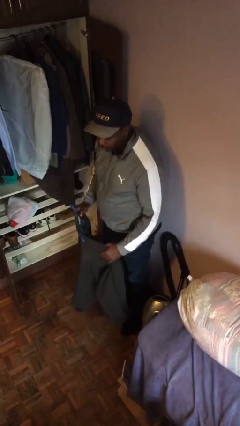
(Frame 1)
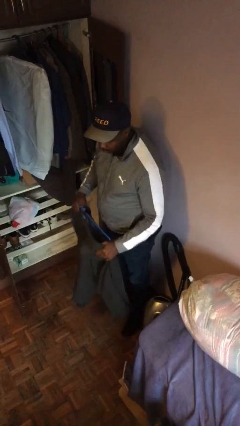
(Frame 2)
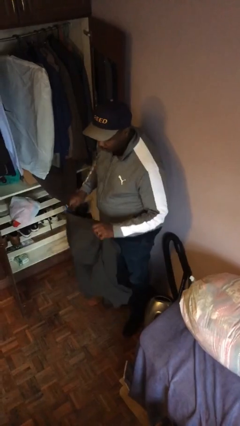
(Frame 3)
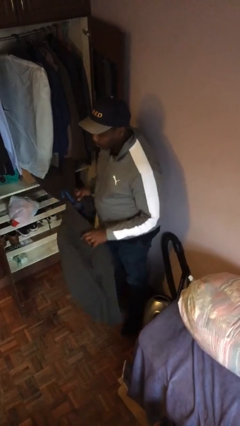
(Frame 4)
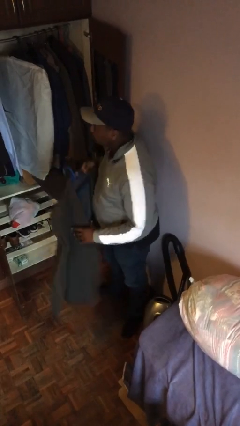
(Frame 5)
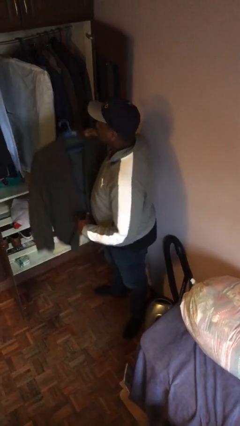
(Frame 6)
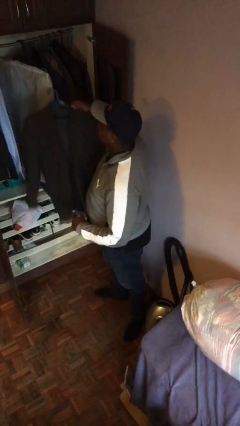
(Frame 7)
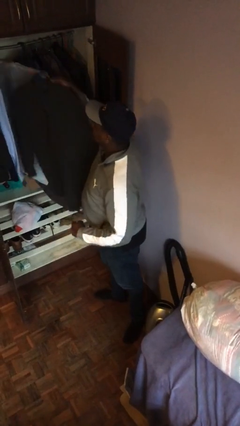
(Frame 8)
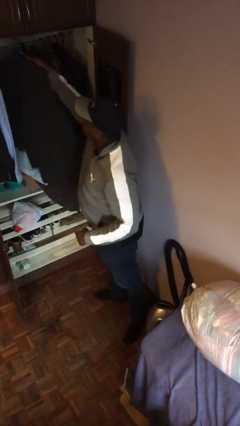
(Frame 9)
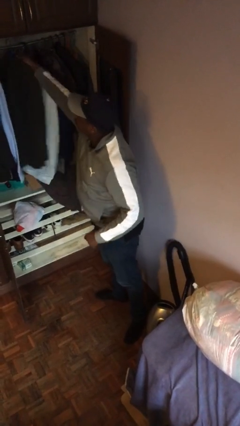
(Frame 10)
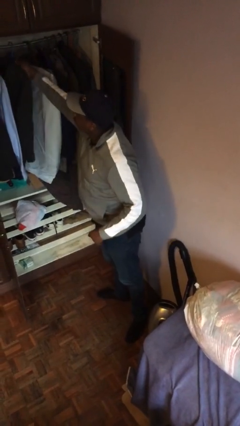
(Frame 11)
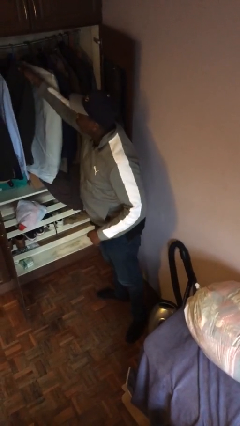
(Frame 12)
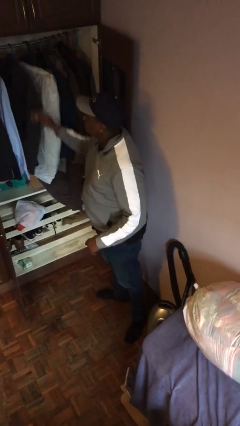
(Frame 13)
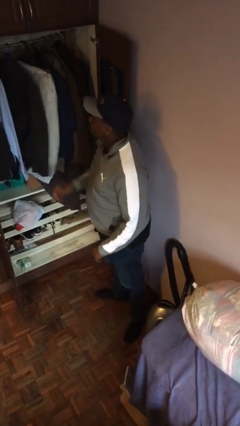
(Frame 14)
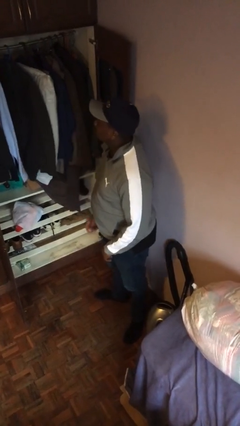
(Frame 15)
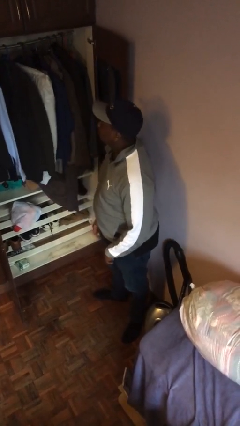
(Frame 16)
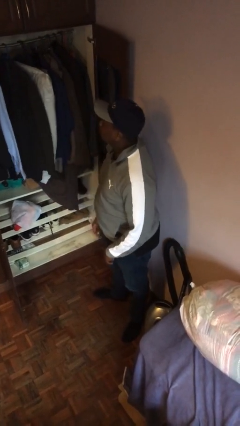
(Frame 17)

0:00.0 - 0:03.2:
person puts clothes into closet

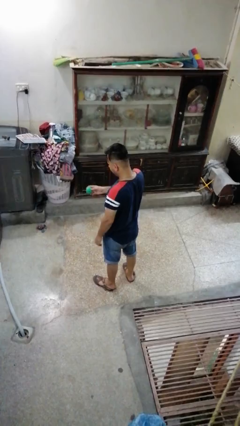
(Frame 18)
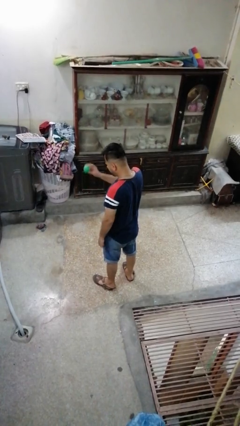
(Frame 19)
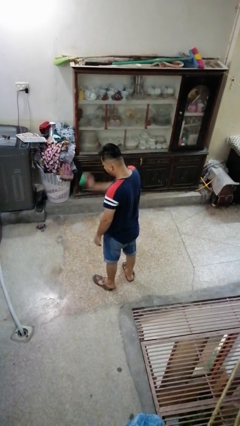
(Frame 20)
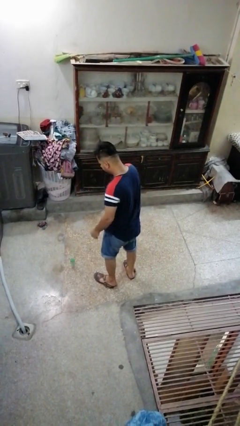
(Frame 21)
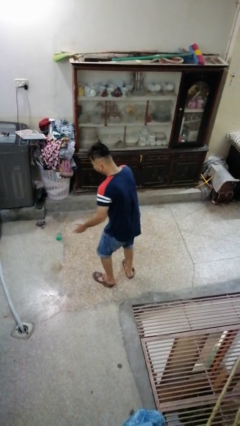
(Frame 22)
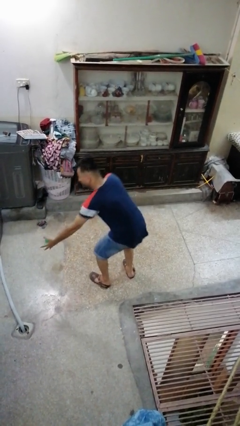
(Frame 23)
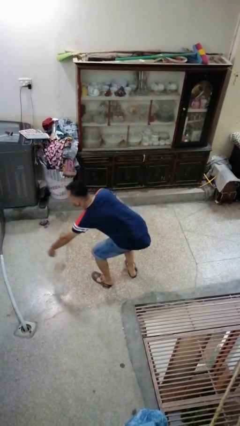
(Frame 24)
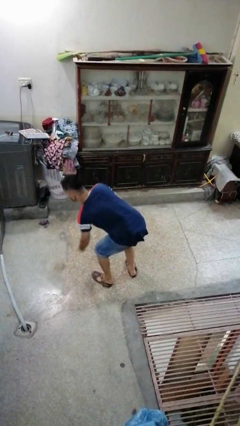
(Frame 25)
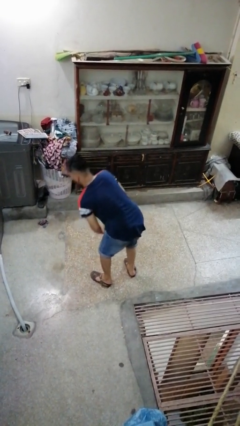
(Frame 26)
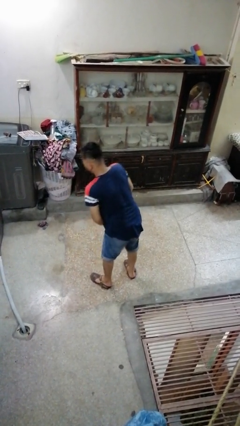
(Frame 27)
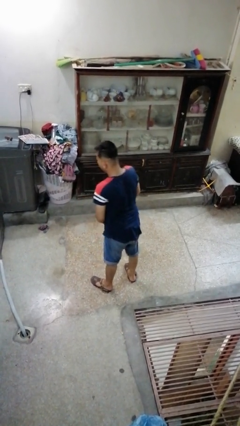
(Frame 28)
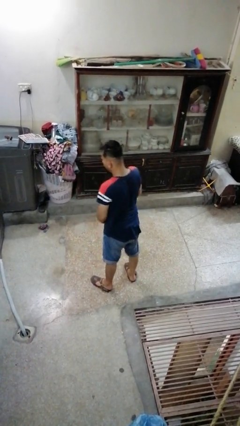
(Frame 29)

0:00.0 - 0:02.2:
person bounces ball on floor

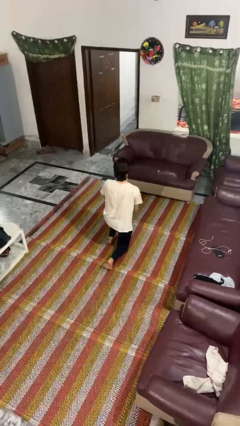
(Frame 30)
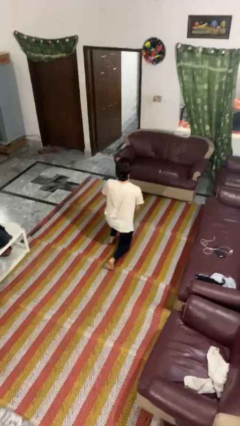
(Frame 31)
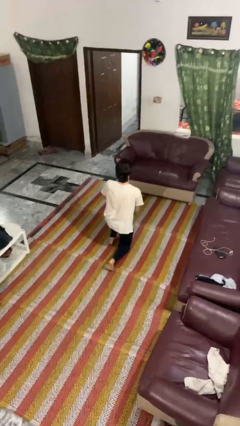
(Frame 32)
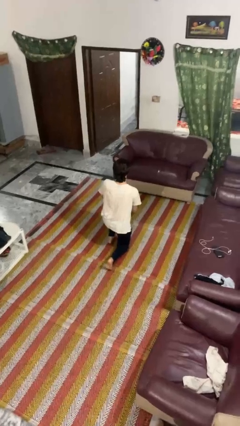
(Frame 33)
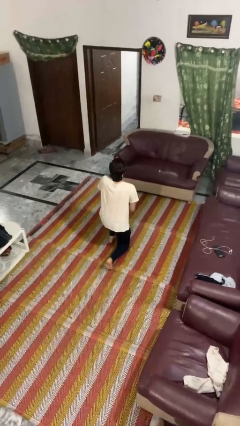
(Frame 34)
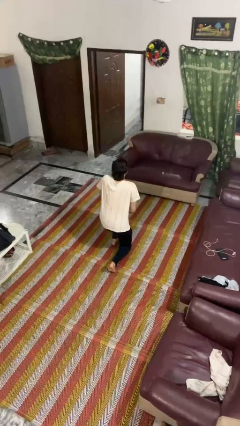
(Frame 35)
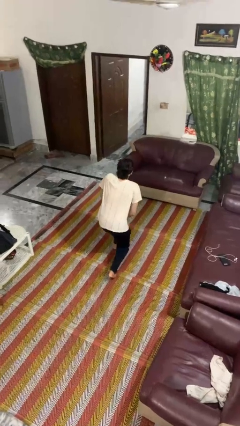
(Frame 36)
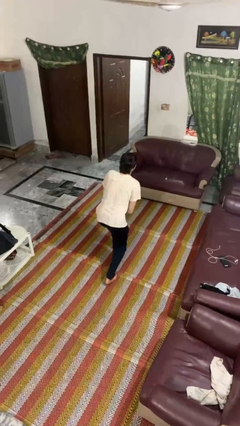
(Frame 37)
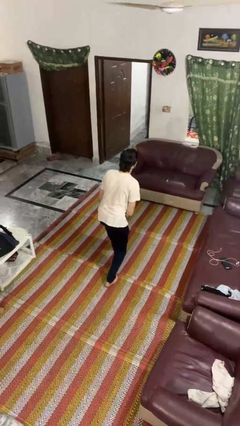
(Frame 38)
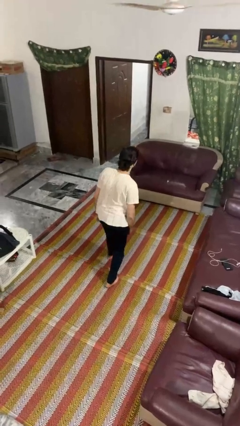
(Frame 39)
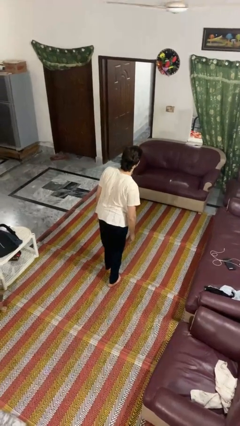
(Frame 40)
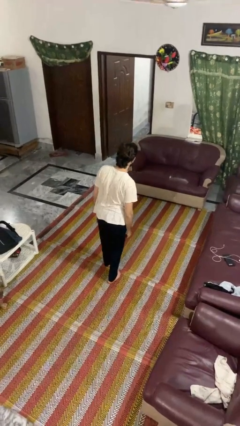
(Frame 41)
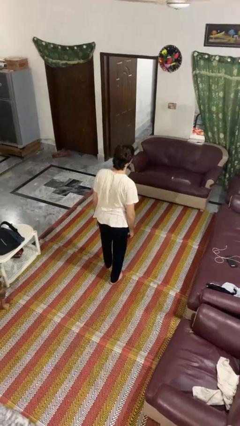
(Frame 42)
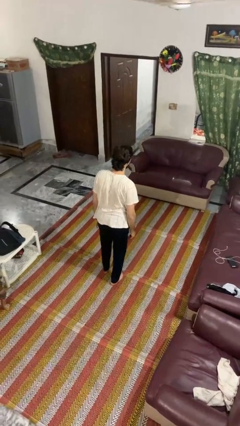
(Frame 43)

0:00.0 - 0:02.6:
person stands up from floor

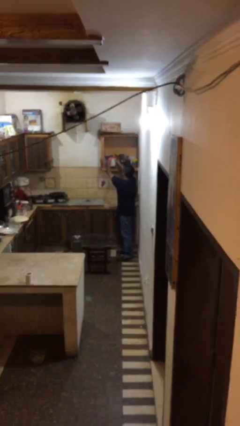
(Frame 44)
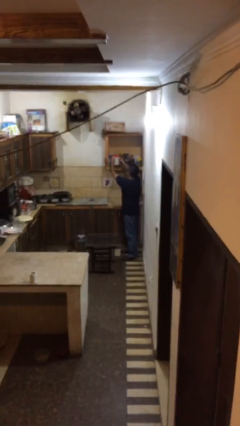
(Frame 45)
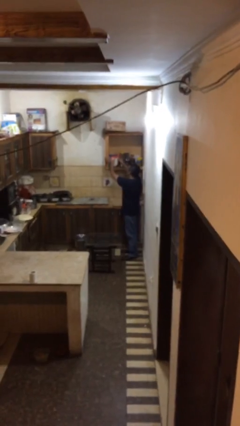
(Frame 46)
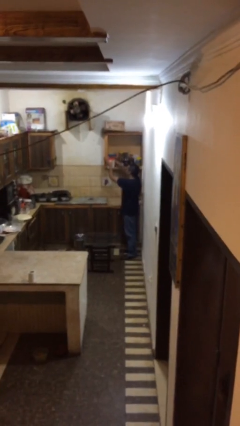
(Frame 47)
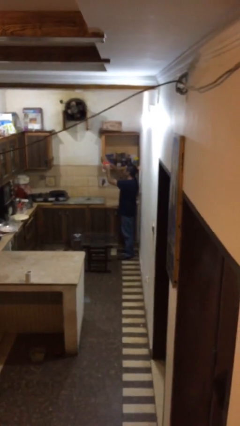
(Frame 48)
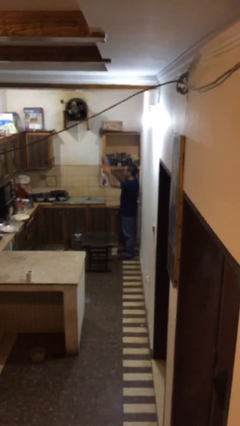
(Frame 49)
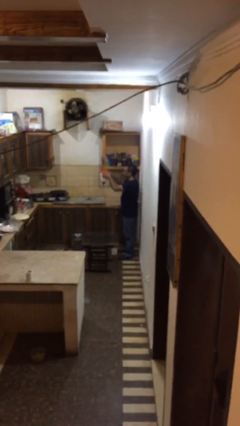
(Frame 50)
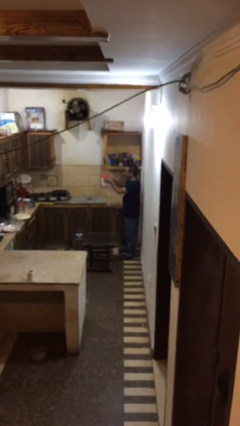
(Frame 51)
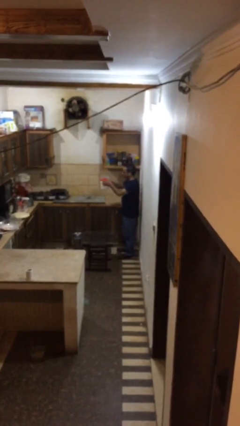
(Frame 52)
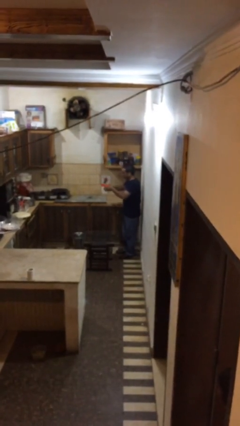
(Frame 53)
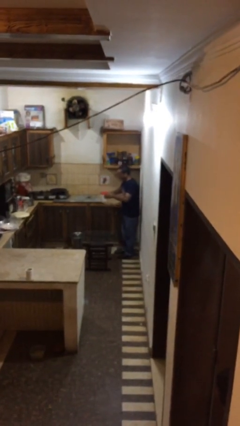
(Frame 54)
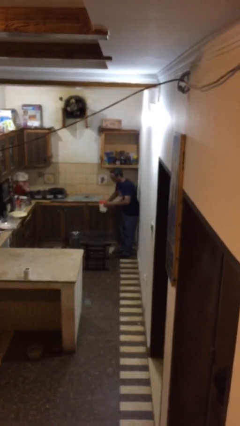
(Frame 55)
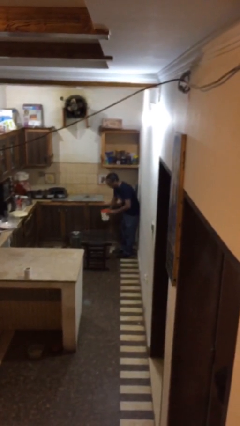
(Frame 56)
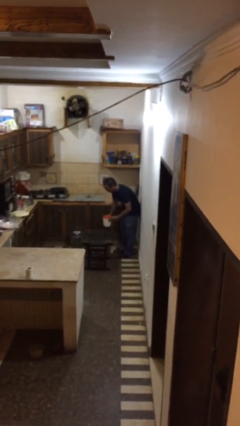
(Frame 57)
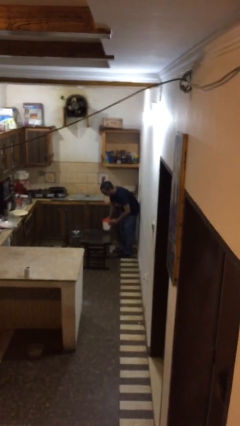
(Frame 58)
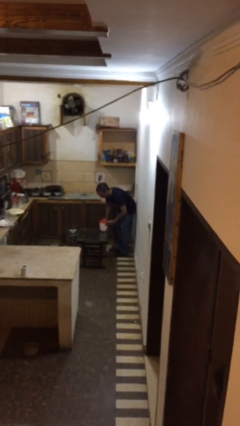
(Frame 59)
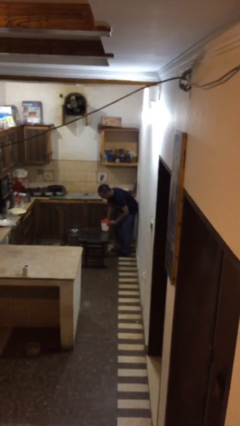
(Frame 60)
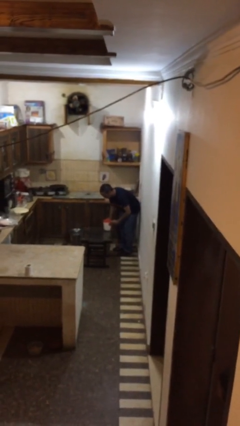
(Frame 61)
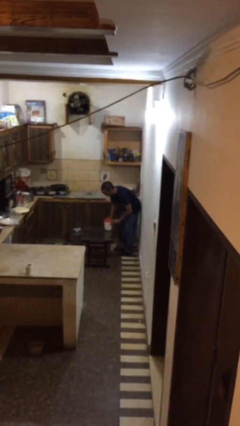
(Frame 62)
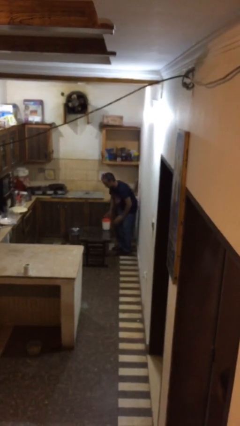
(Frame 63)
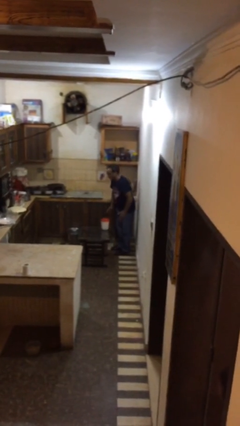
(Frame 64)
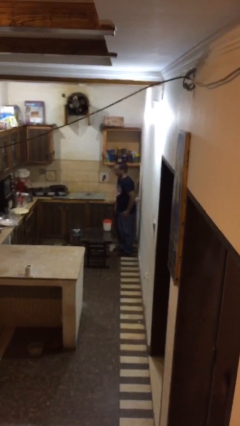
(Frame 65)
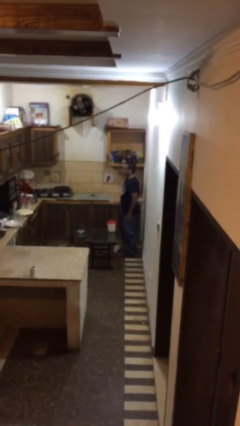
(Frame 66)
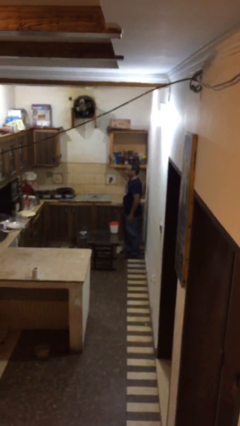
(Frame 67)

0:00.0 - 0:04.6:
person puts down object on table

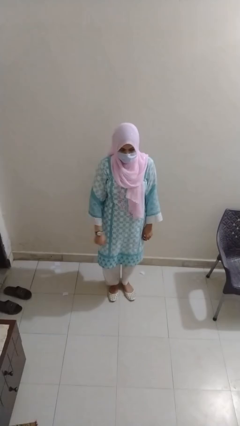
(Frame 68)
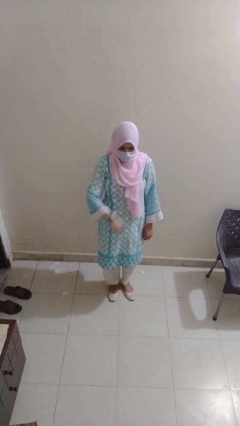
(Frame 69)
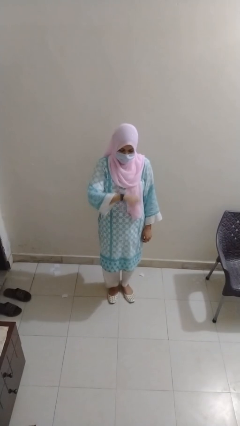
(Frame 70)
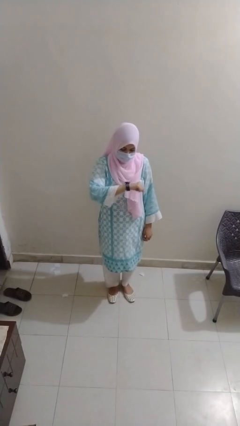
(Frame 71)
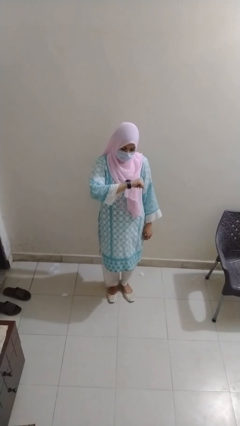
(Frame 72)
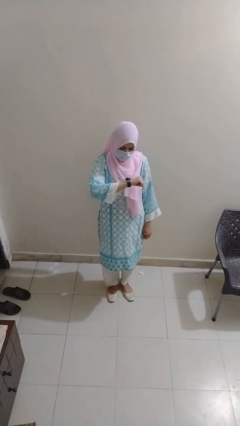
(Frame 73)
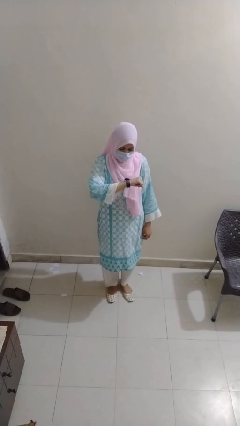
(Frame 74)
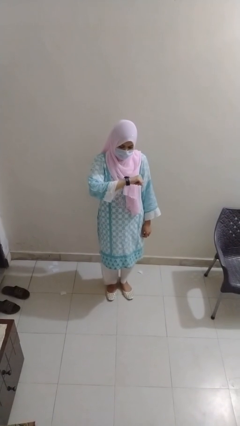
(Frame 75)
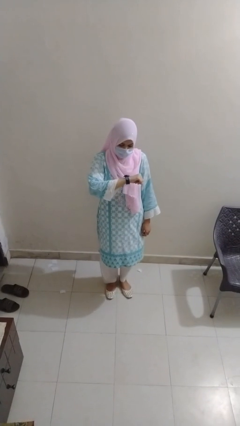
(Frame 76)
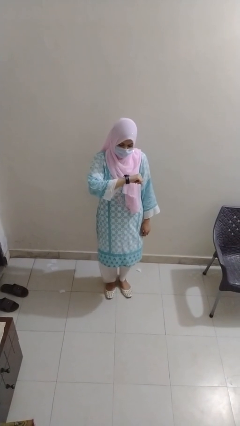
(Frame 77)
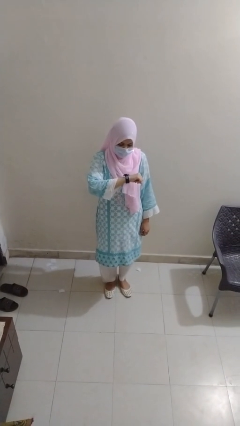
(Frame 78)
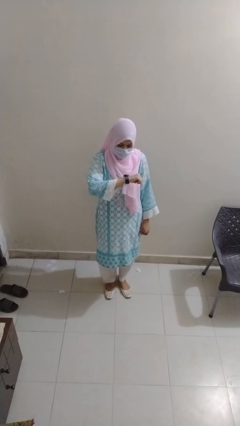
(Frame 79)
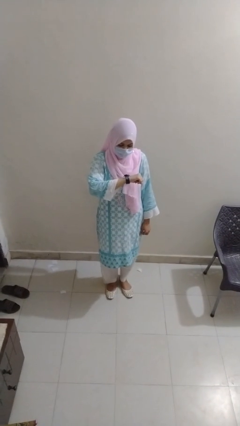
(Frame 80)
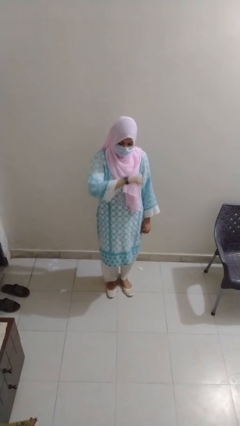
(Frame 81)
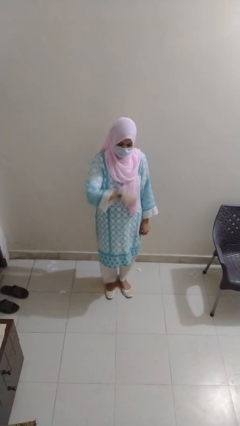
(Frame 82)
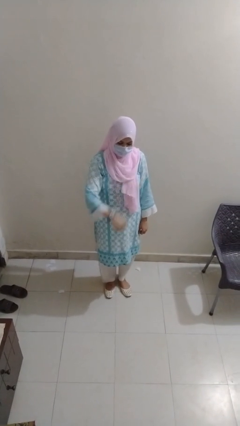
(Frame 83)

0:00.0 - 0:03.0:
person looks at wristwatch

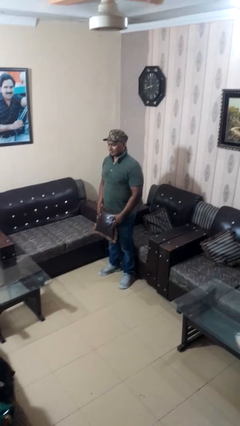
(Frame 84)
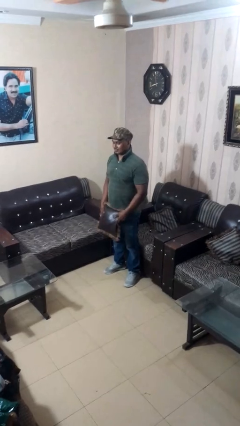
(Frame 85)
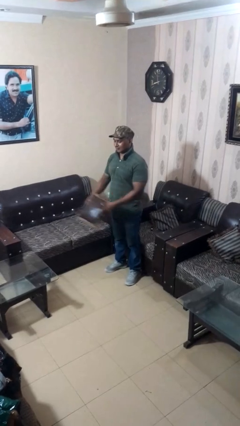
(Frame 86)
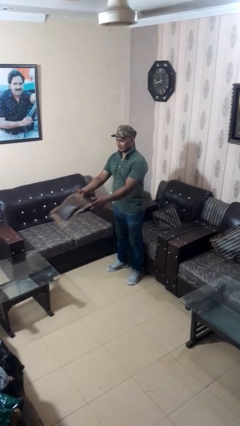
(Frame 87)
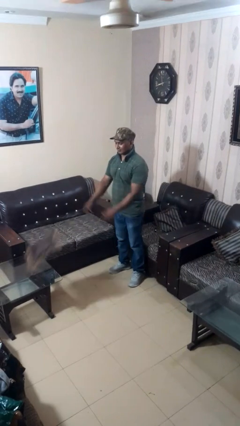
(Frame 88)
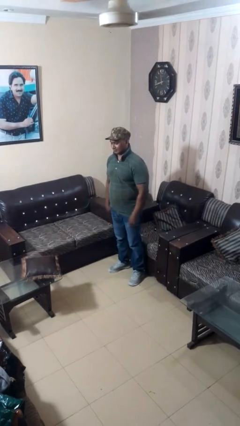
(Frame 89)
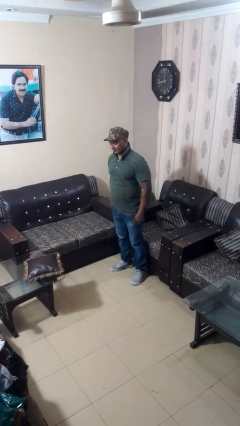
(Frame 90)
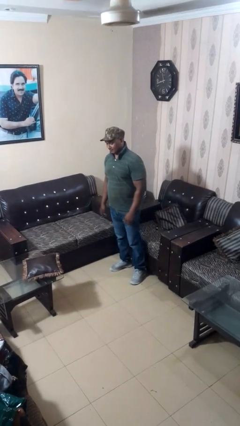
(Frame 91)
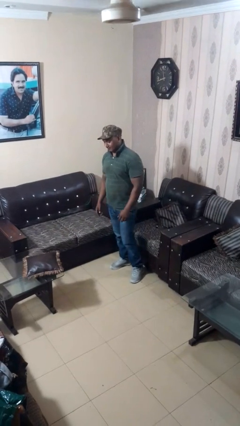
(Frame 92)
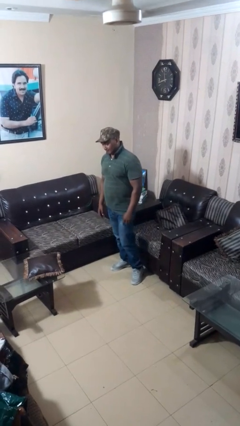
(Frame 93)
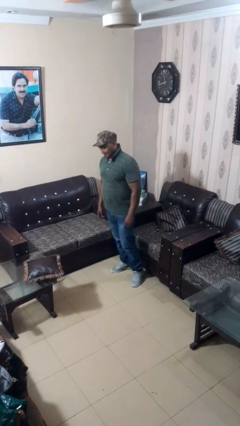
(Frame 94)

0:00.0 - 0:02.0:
person throws object on table
